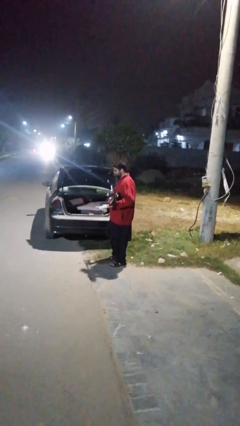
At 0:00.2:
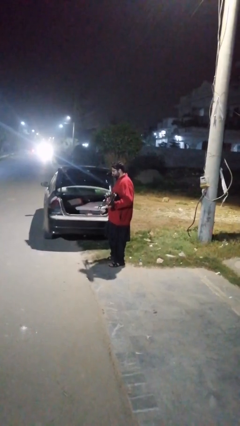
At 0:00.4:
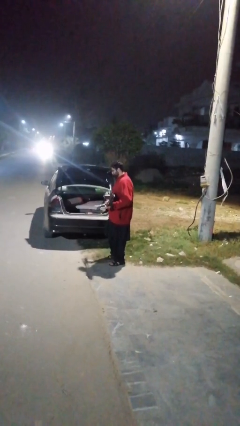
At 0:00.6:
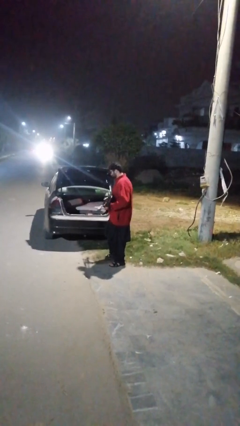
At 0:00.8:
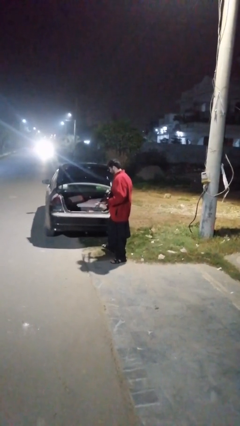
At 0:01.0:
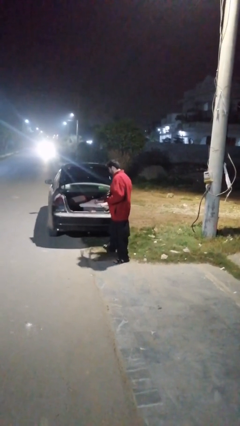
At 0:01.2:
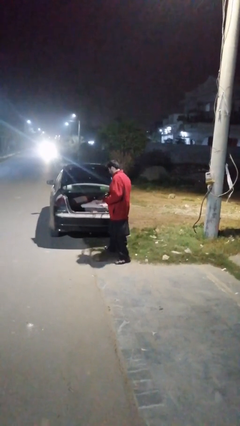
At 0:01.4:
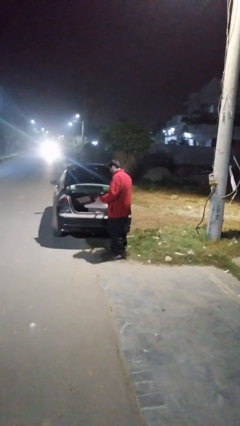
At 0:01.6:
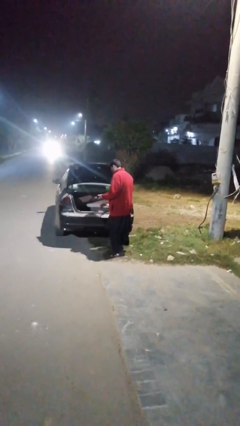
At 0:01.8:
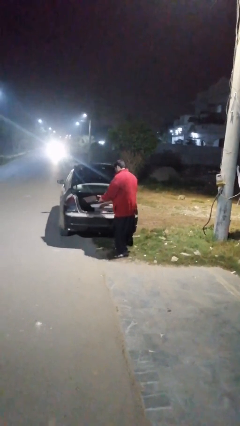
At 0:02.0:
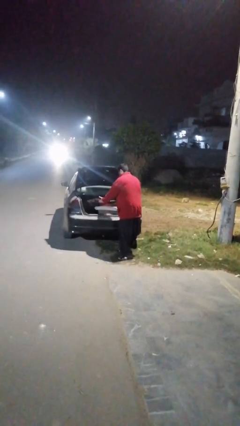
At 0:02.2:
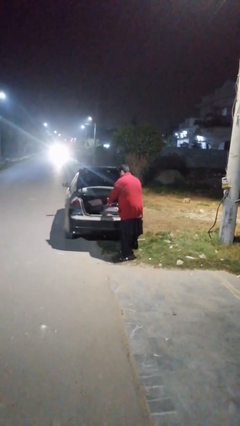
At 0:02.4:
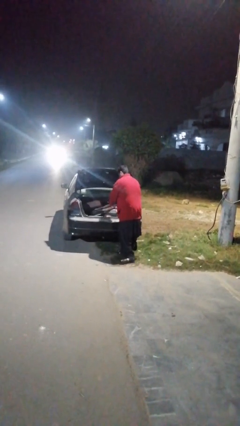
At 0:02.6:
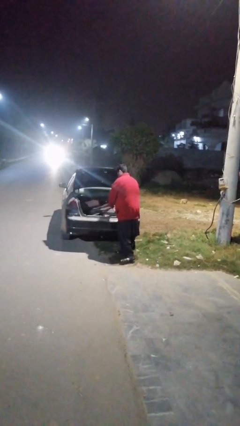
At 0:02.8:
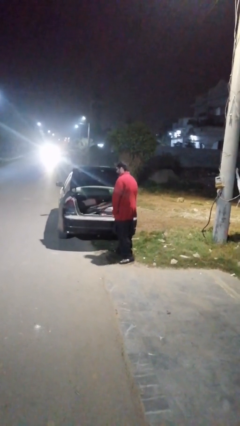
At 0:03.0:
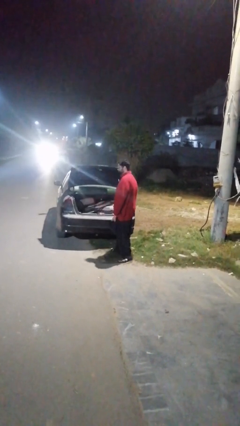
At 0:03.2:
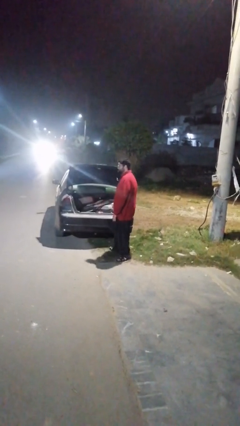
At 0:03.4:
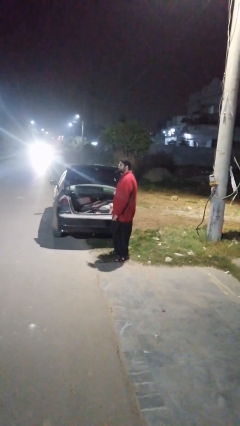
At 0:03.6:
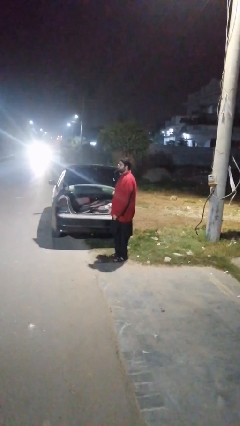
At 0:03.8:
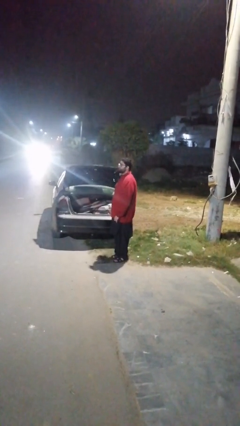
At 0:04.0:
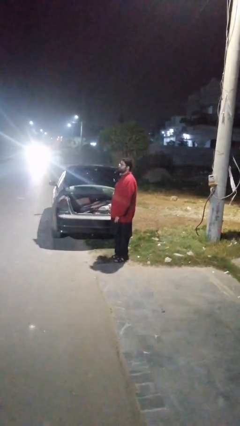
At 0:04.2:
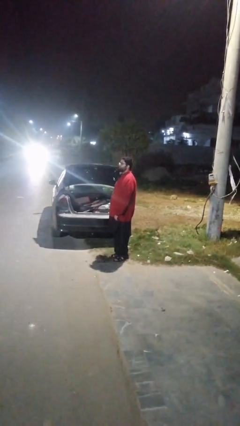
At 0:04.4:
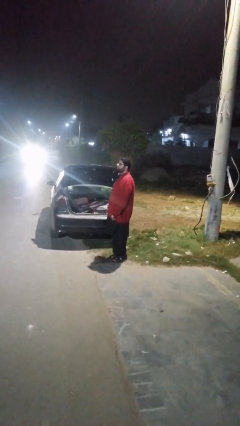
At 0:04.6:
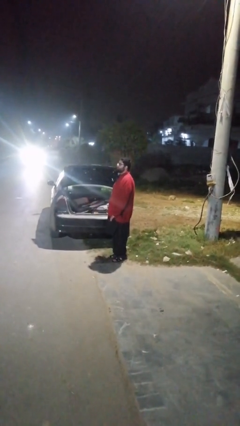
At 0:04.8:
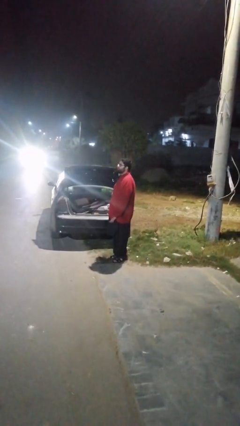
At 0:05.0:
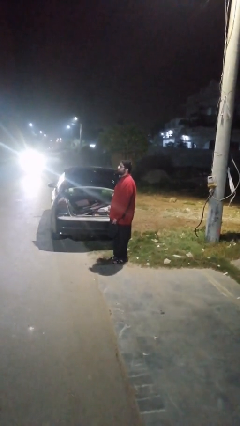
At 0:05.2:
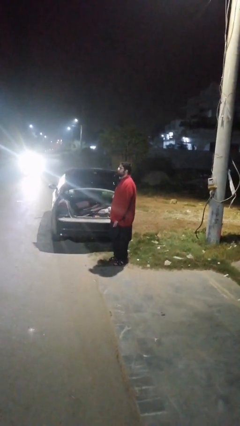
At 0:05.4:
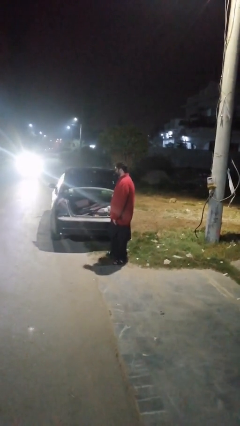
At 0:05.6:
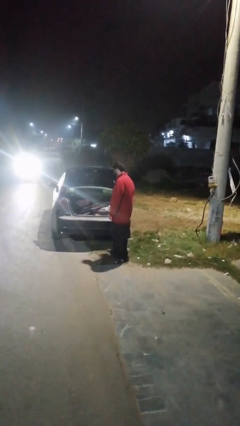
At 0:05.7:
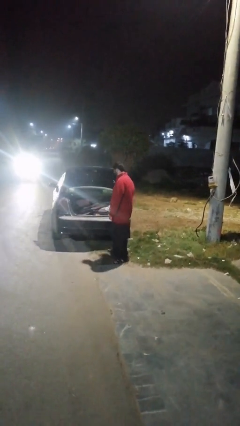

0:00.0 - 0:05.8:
person loads car

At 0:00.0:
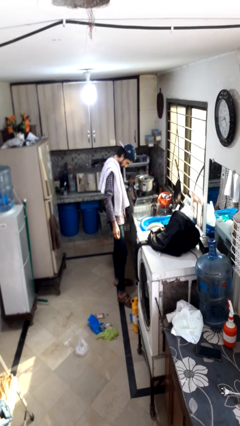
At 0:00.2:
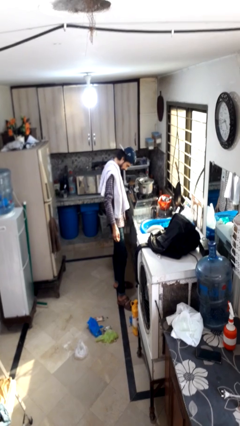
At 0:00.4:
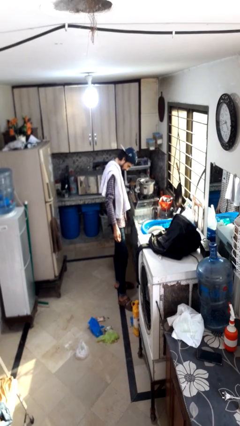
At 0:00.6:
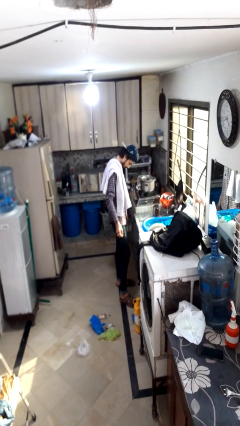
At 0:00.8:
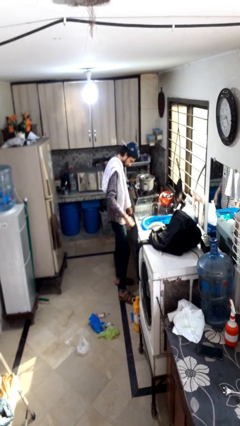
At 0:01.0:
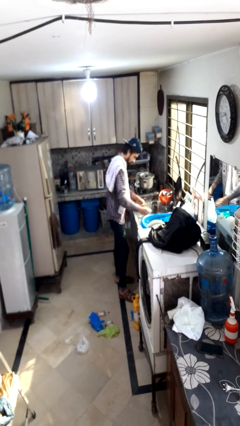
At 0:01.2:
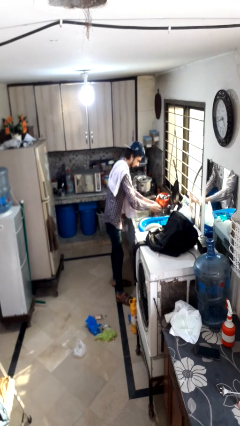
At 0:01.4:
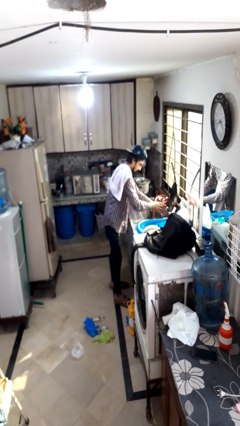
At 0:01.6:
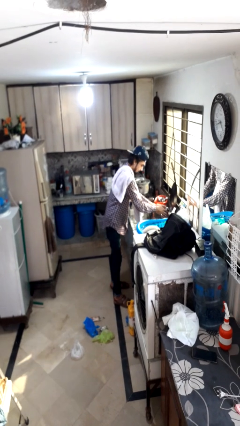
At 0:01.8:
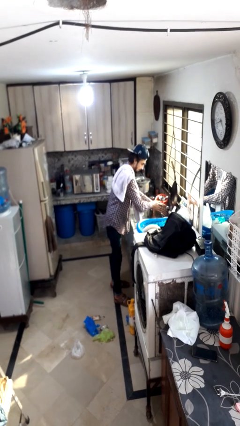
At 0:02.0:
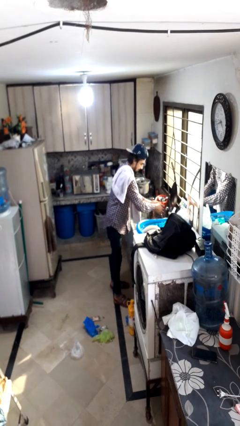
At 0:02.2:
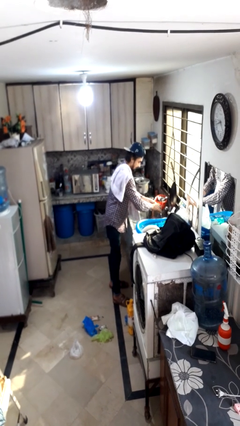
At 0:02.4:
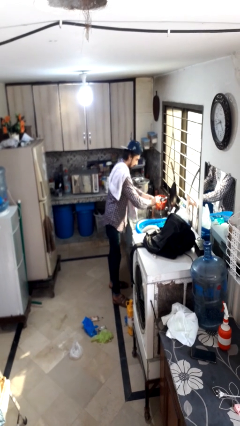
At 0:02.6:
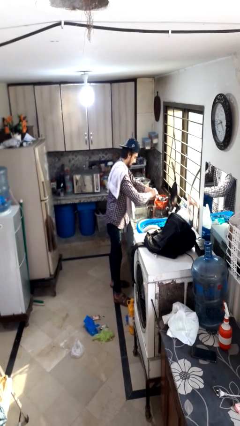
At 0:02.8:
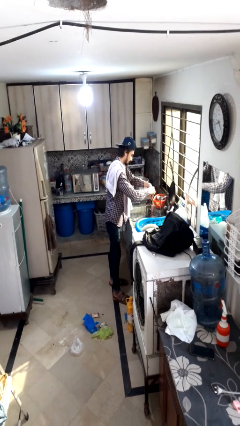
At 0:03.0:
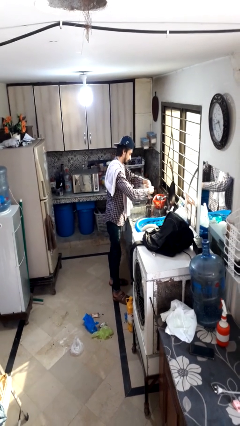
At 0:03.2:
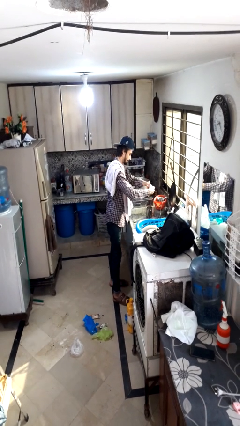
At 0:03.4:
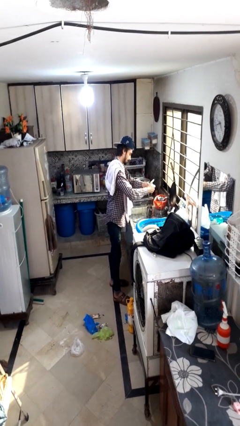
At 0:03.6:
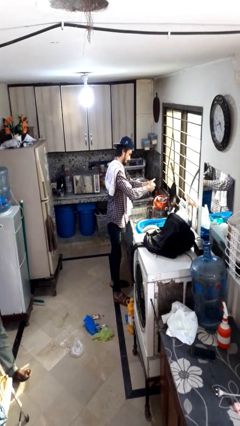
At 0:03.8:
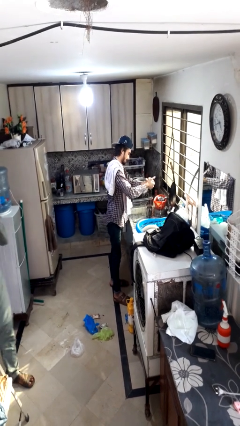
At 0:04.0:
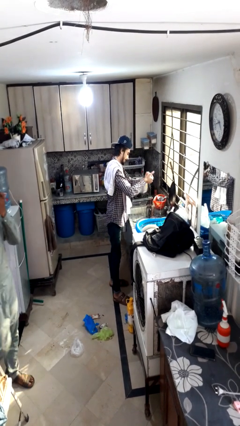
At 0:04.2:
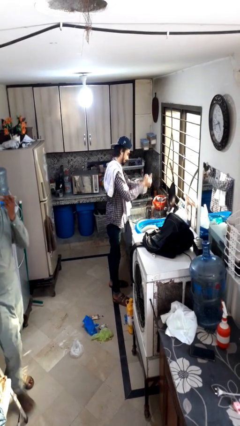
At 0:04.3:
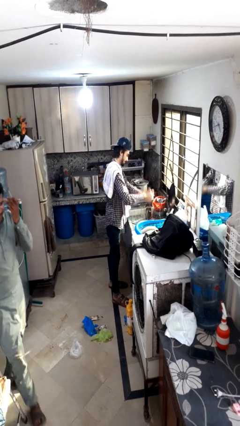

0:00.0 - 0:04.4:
person washes hands

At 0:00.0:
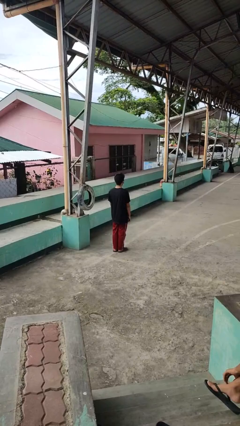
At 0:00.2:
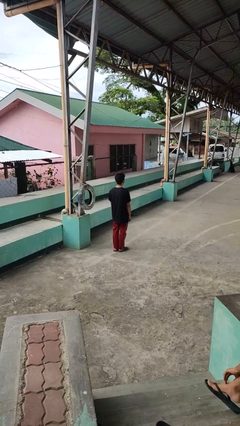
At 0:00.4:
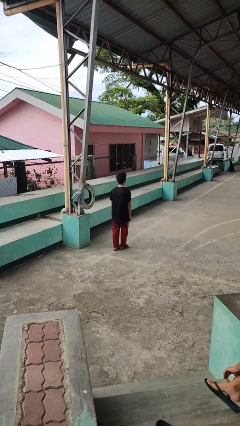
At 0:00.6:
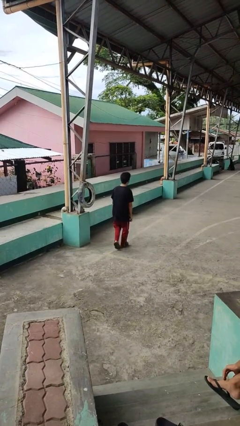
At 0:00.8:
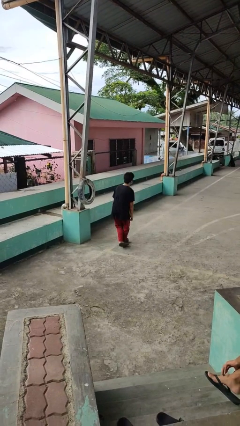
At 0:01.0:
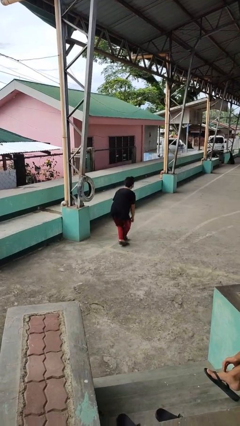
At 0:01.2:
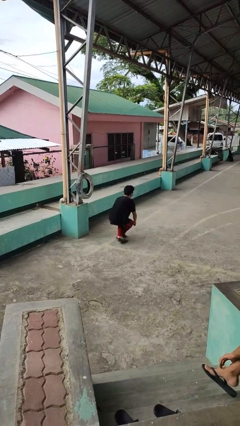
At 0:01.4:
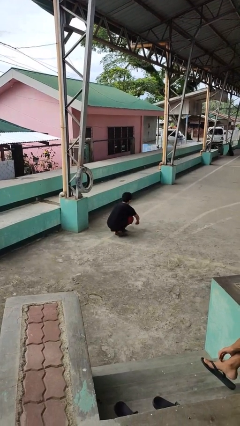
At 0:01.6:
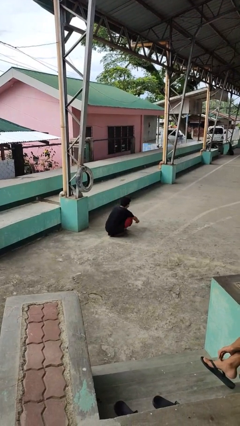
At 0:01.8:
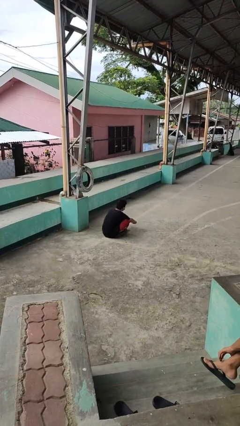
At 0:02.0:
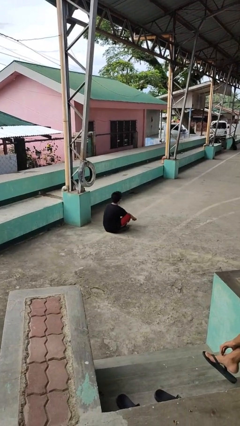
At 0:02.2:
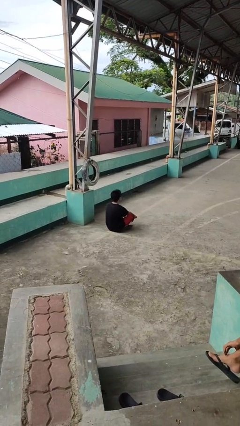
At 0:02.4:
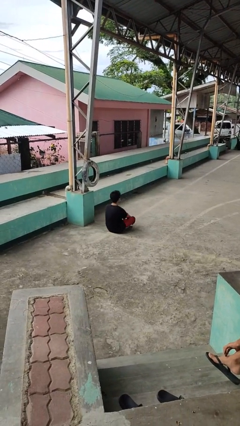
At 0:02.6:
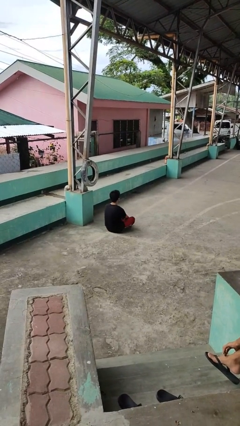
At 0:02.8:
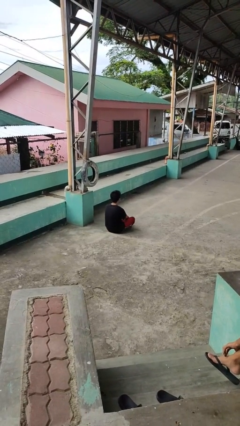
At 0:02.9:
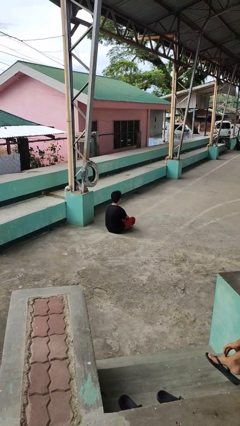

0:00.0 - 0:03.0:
person sits crisscross

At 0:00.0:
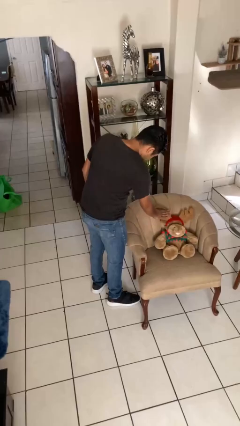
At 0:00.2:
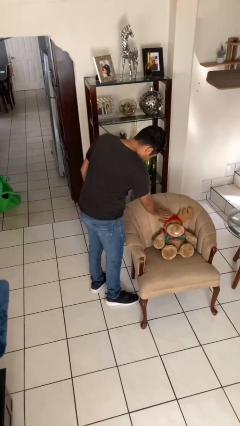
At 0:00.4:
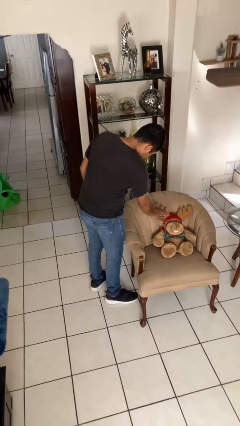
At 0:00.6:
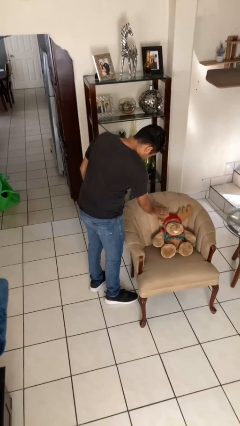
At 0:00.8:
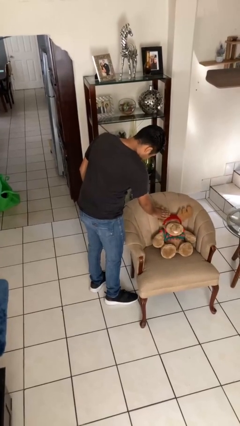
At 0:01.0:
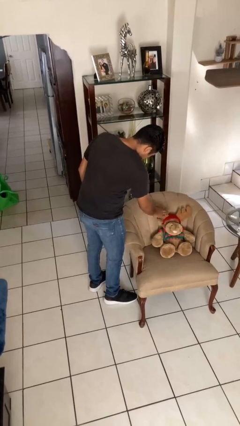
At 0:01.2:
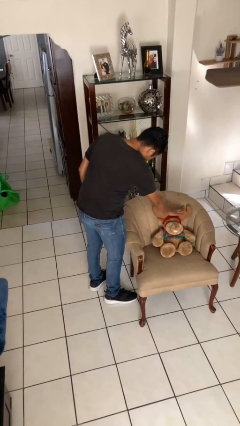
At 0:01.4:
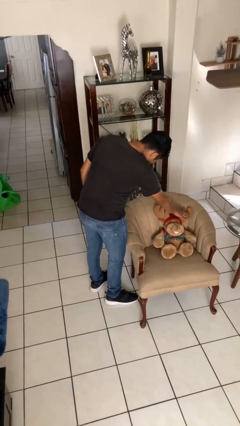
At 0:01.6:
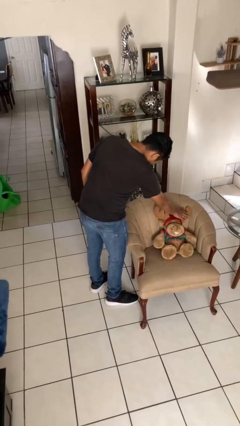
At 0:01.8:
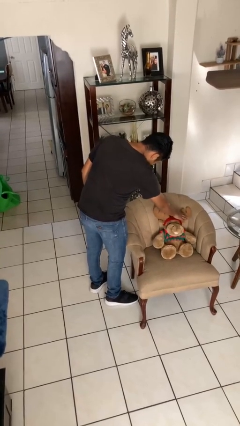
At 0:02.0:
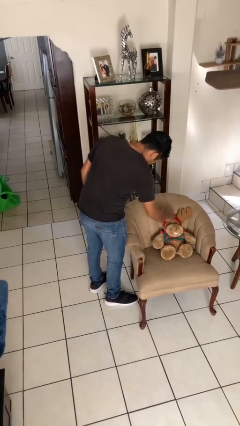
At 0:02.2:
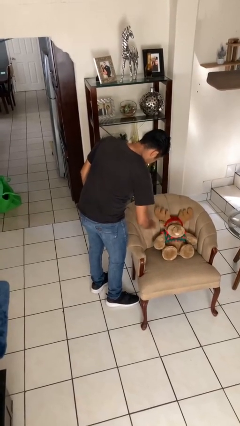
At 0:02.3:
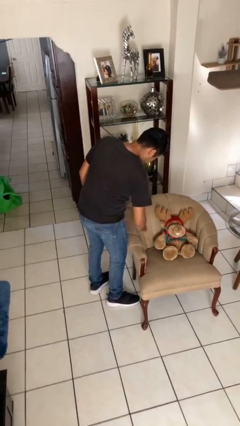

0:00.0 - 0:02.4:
person waves hand over object

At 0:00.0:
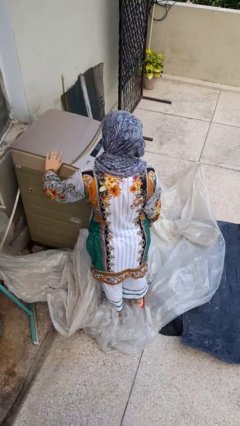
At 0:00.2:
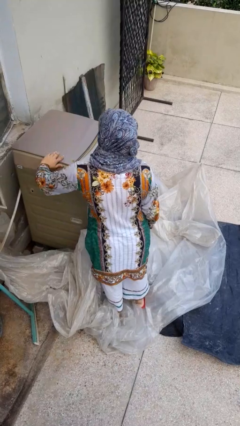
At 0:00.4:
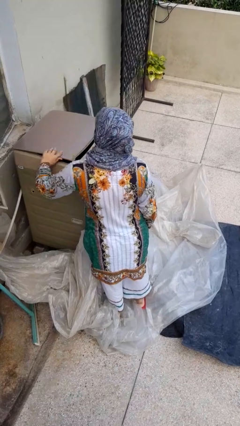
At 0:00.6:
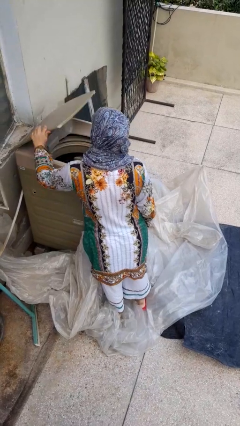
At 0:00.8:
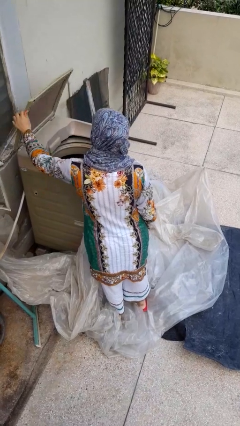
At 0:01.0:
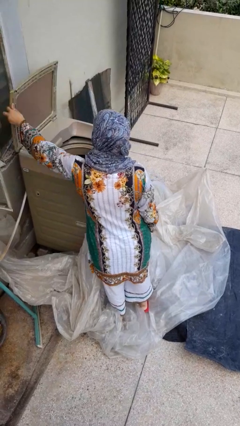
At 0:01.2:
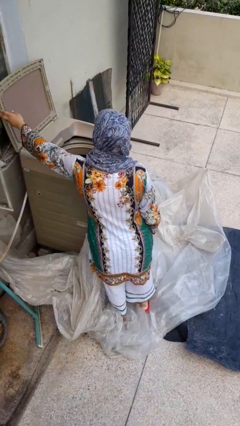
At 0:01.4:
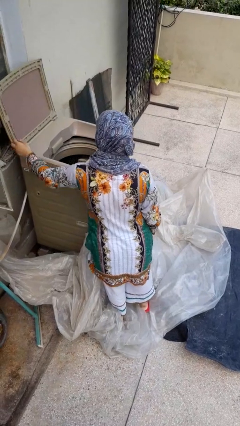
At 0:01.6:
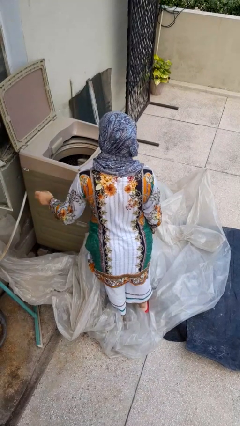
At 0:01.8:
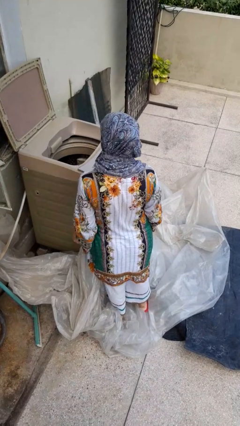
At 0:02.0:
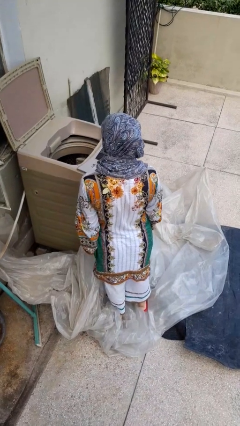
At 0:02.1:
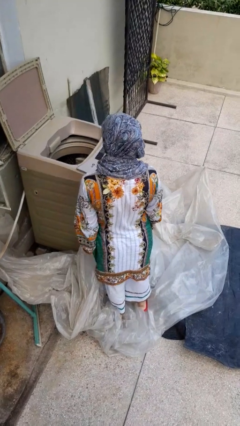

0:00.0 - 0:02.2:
person opens clothes washer
